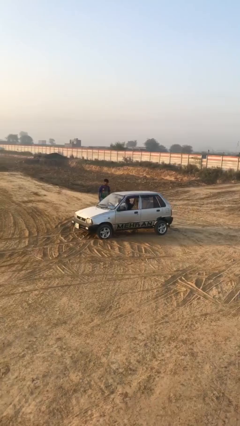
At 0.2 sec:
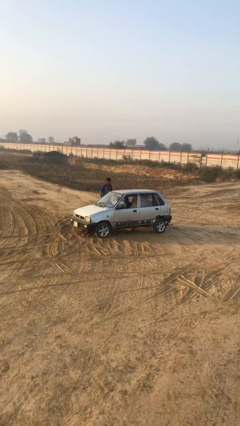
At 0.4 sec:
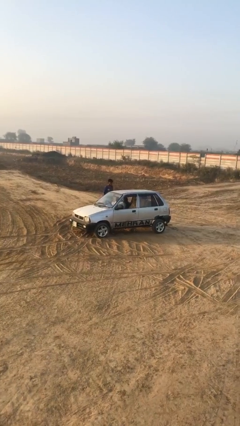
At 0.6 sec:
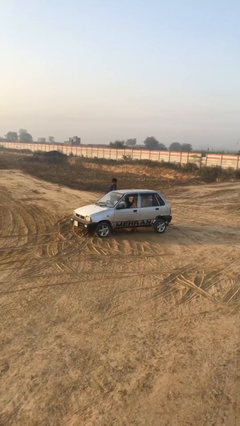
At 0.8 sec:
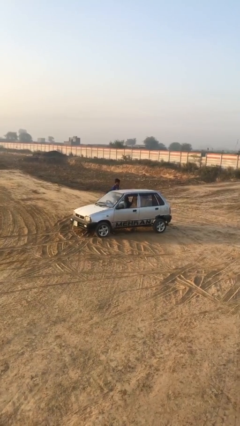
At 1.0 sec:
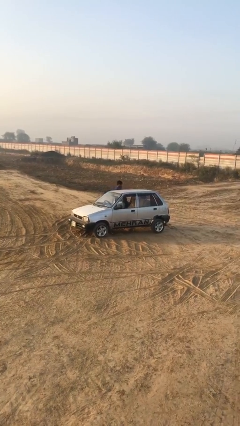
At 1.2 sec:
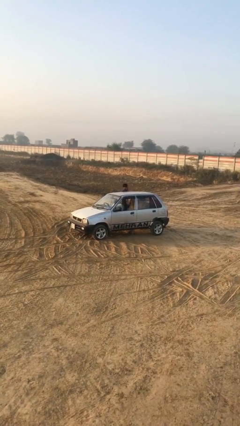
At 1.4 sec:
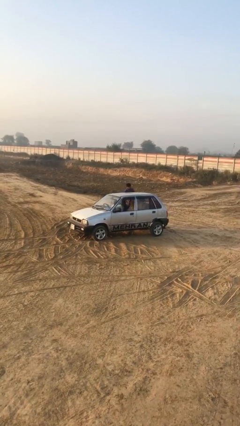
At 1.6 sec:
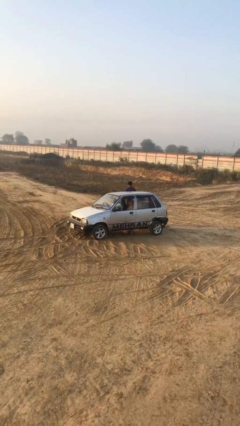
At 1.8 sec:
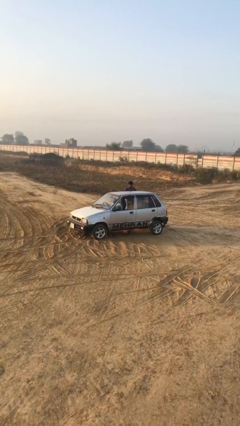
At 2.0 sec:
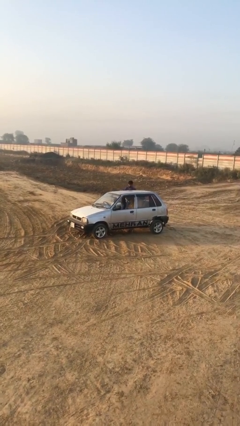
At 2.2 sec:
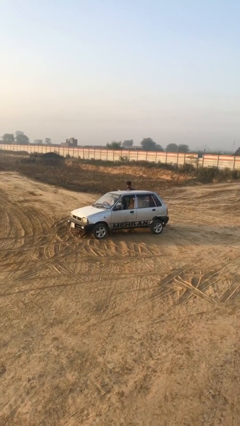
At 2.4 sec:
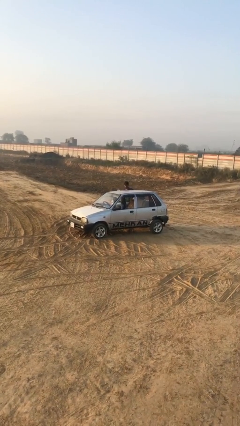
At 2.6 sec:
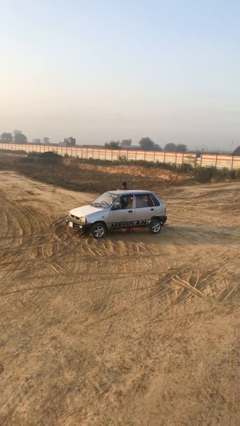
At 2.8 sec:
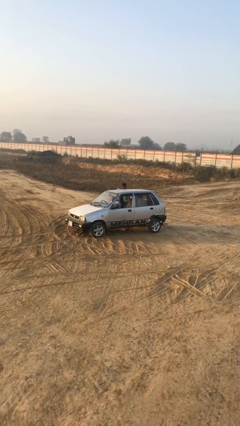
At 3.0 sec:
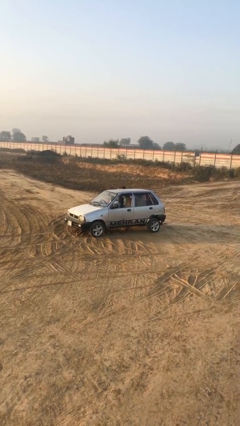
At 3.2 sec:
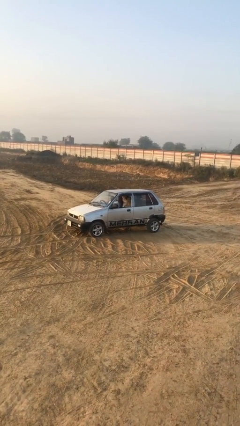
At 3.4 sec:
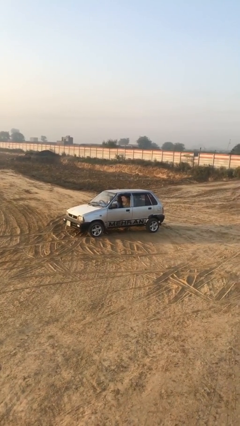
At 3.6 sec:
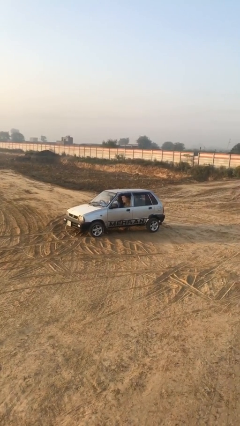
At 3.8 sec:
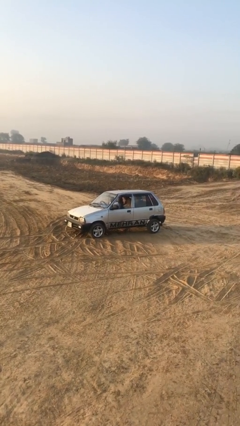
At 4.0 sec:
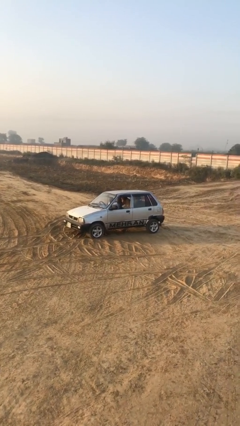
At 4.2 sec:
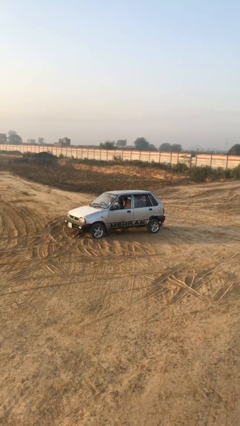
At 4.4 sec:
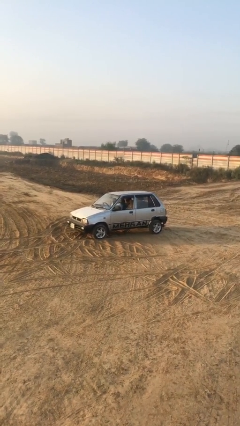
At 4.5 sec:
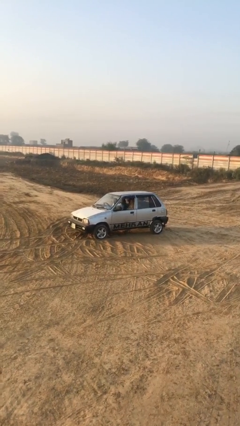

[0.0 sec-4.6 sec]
car picks up person

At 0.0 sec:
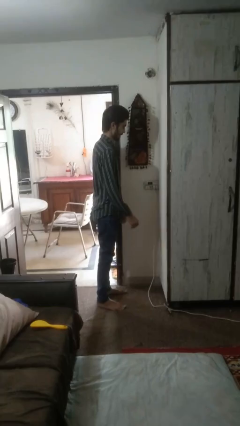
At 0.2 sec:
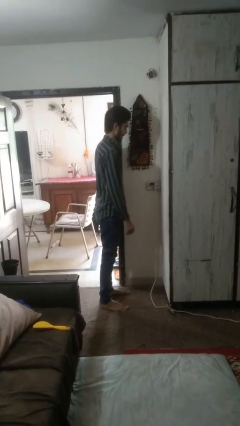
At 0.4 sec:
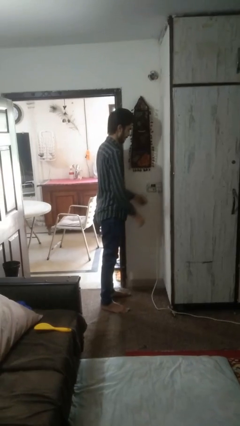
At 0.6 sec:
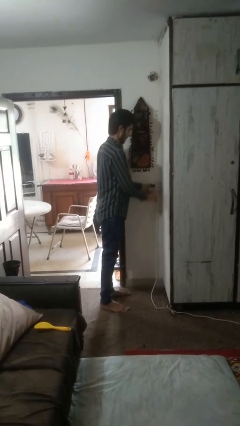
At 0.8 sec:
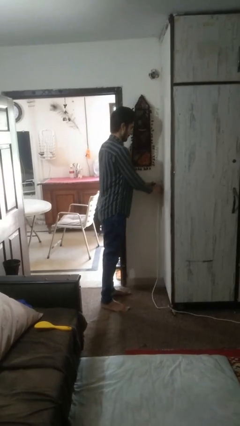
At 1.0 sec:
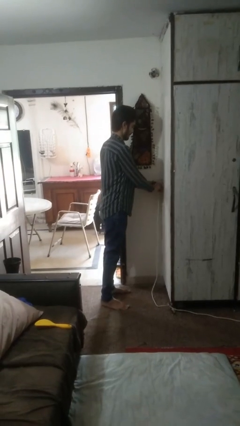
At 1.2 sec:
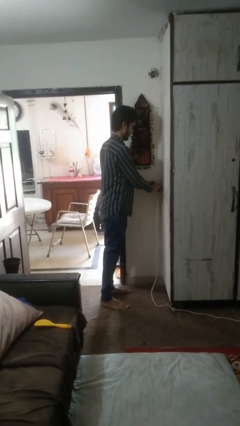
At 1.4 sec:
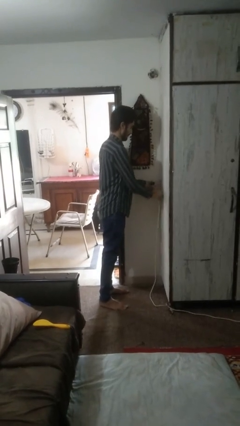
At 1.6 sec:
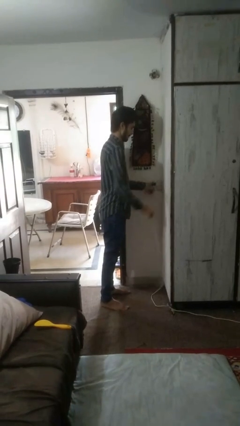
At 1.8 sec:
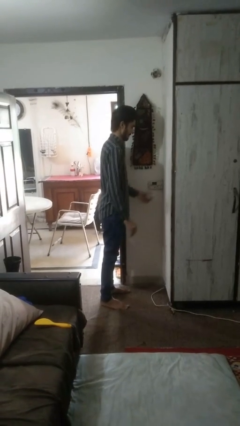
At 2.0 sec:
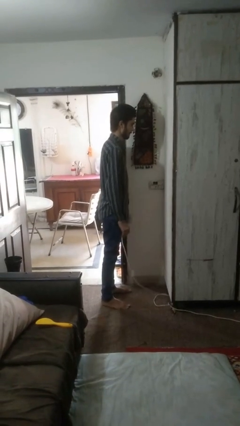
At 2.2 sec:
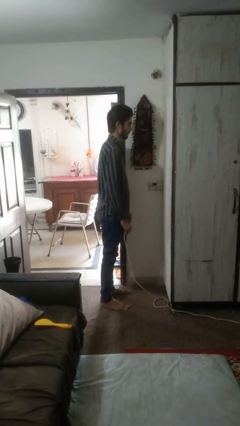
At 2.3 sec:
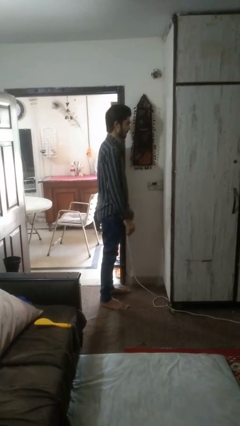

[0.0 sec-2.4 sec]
person unplugs from electrical socket

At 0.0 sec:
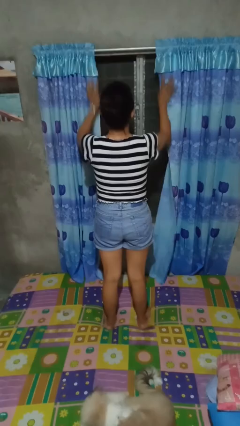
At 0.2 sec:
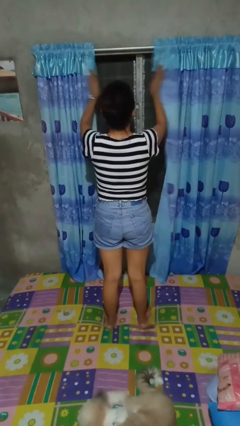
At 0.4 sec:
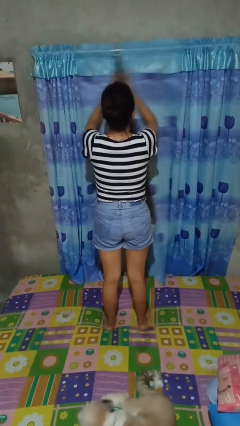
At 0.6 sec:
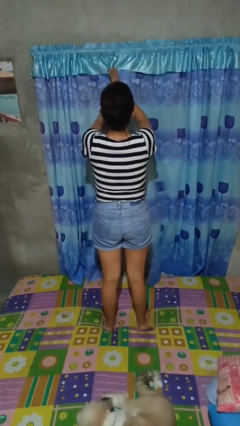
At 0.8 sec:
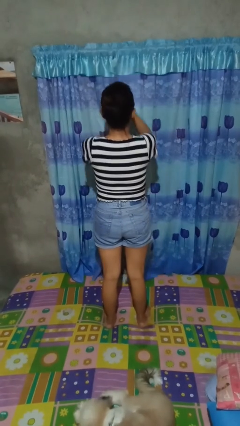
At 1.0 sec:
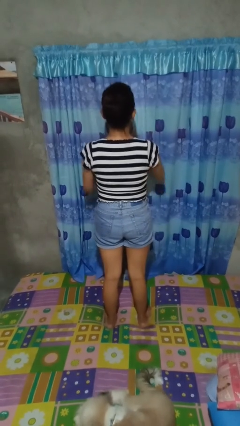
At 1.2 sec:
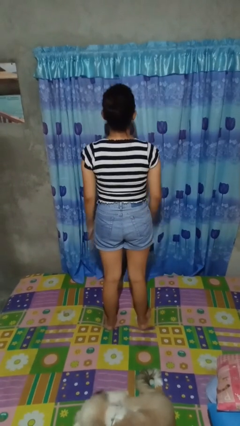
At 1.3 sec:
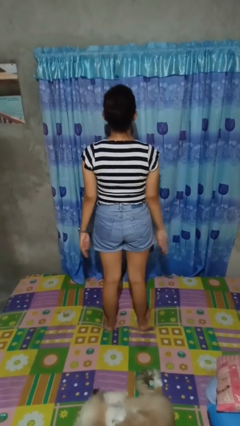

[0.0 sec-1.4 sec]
person closes curtains

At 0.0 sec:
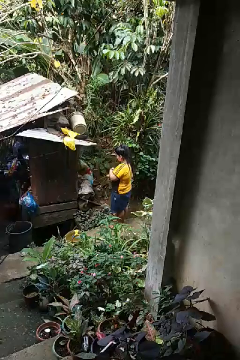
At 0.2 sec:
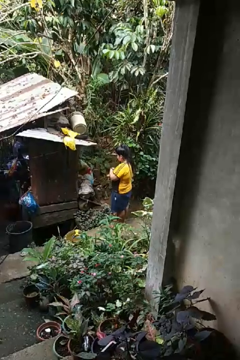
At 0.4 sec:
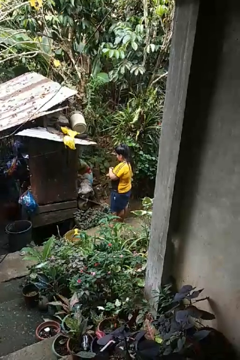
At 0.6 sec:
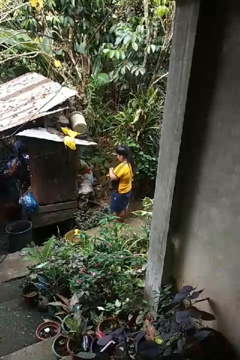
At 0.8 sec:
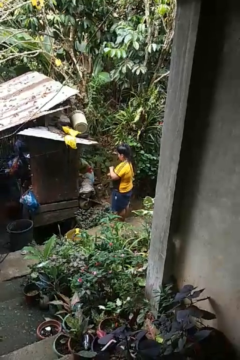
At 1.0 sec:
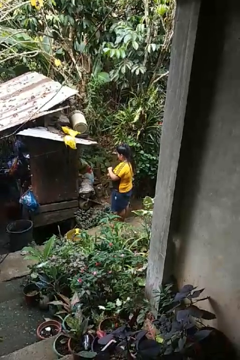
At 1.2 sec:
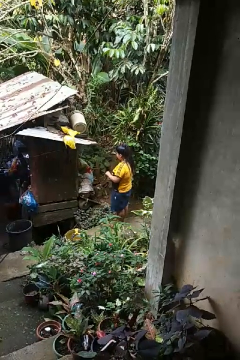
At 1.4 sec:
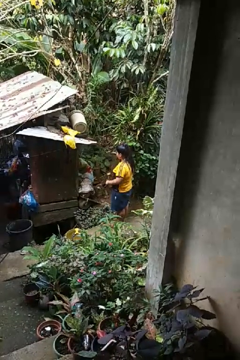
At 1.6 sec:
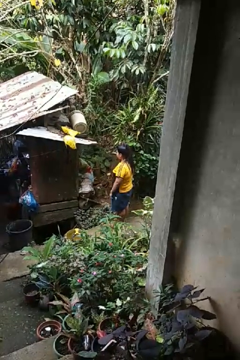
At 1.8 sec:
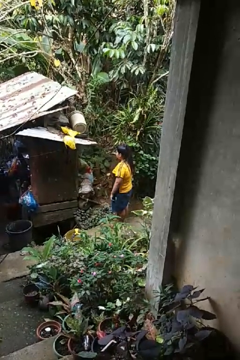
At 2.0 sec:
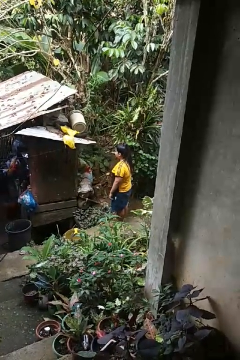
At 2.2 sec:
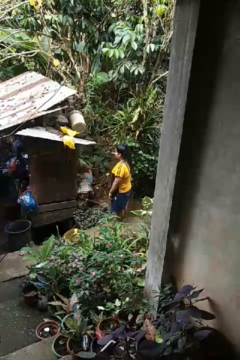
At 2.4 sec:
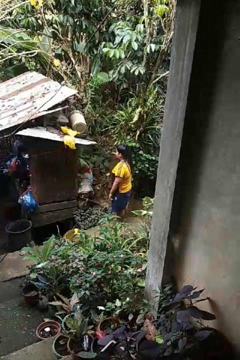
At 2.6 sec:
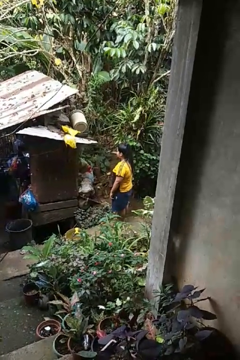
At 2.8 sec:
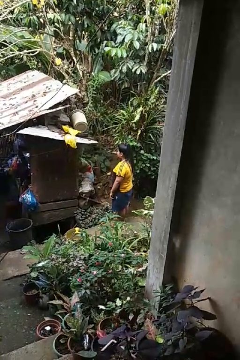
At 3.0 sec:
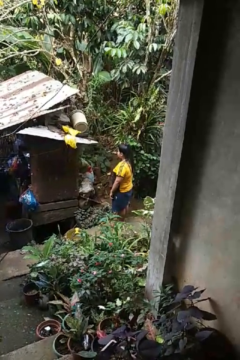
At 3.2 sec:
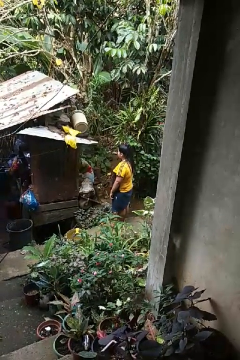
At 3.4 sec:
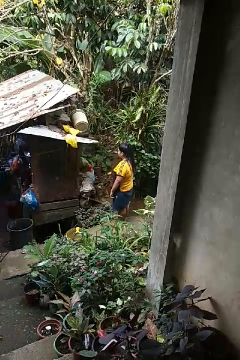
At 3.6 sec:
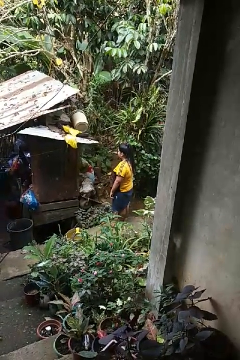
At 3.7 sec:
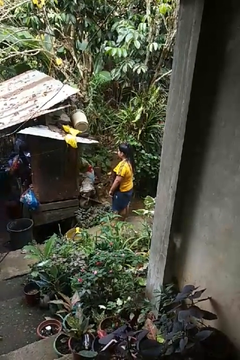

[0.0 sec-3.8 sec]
person takes off wristwatch

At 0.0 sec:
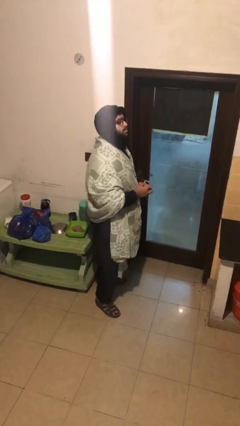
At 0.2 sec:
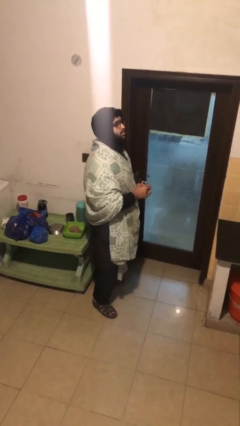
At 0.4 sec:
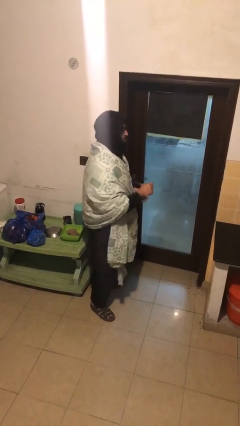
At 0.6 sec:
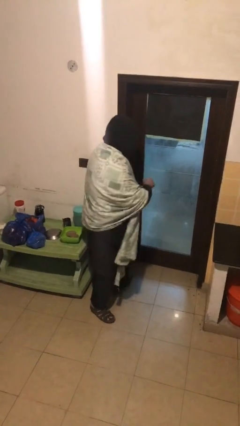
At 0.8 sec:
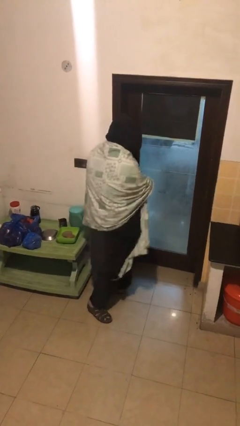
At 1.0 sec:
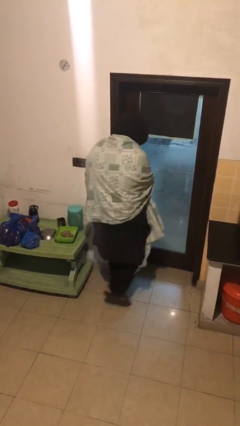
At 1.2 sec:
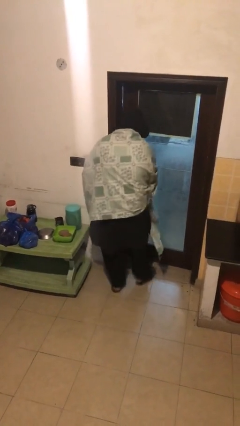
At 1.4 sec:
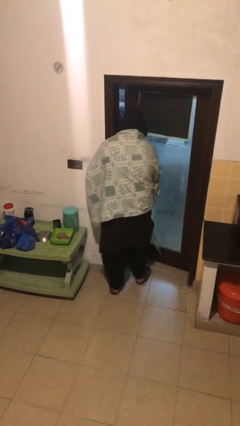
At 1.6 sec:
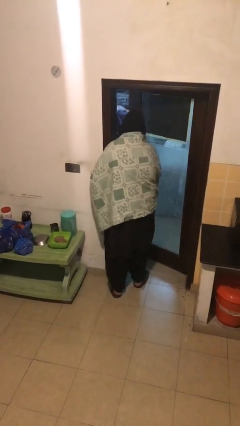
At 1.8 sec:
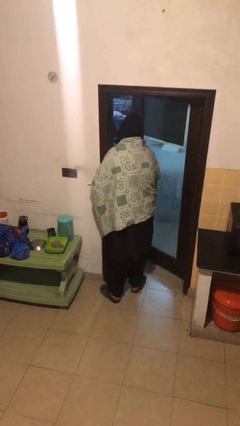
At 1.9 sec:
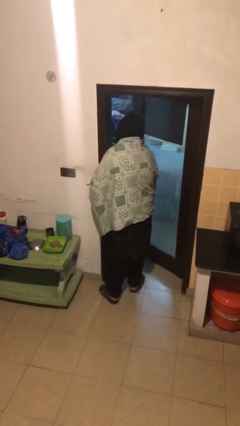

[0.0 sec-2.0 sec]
person opens facility door

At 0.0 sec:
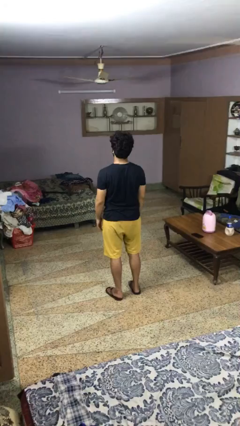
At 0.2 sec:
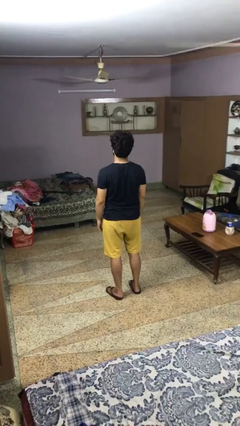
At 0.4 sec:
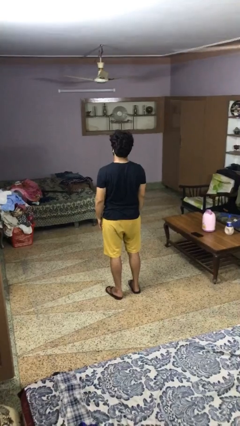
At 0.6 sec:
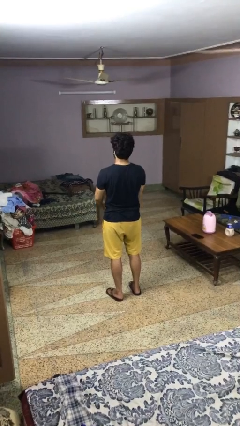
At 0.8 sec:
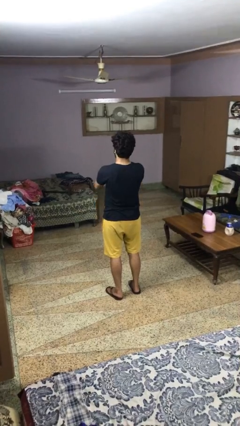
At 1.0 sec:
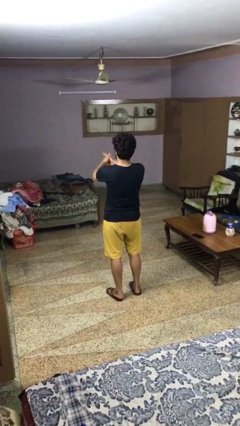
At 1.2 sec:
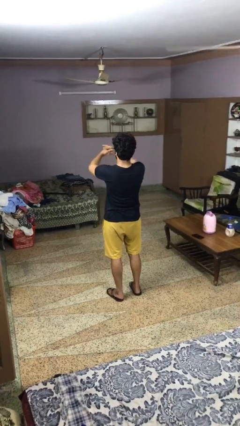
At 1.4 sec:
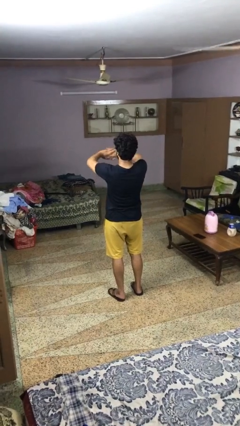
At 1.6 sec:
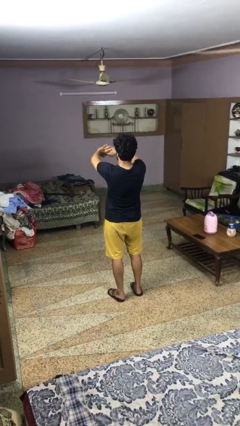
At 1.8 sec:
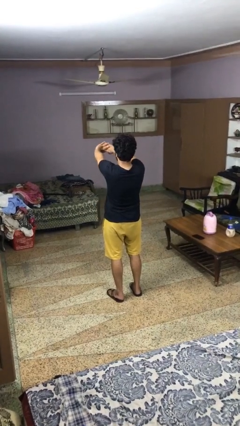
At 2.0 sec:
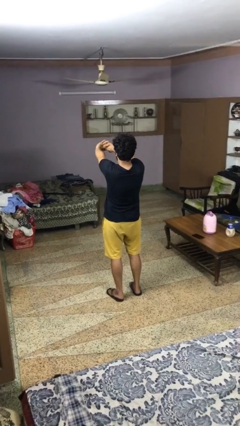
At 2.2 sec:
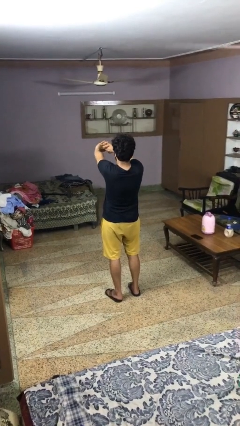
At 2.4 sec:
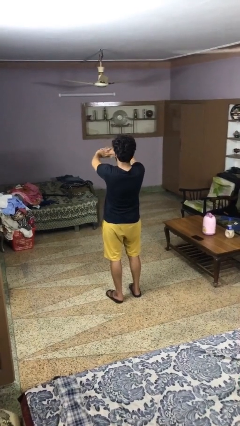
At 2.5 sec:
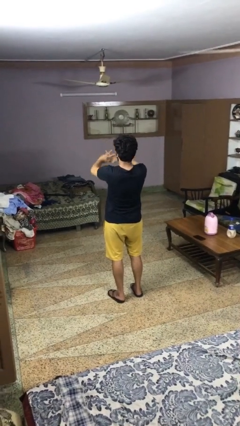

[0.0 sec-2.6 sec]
person cracks knuckles

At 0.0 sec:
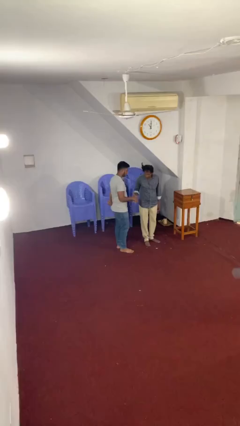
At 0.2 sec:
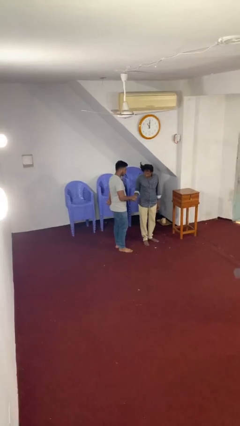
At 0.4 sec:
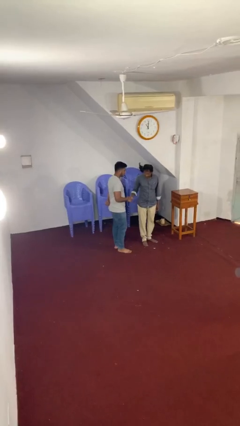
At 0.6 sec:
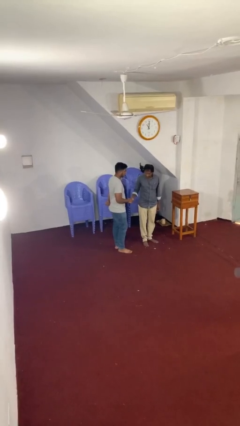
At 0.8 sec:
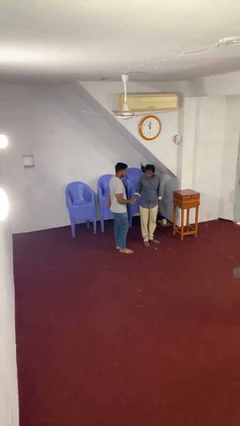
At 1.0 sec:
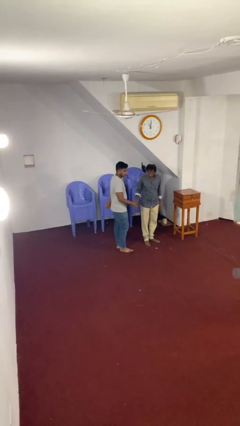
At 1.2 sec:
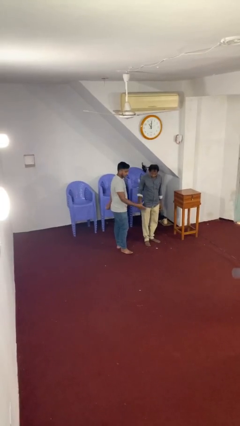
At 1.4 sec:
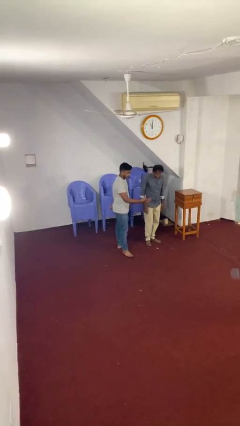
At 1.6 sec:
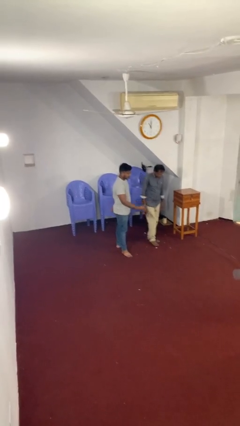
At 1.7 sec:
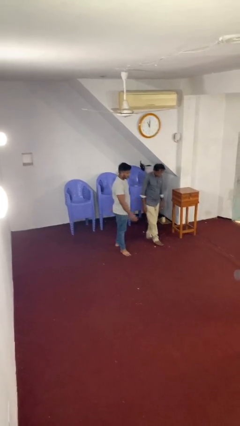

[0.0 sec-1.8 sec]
person shakes hand
